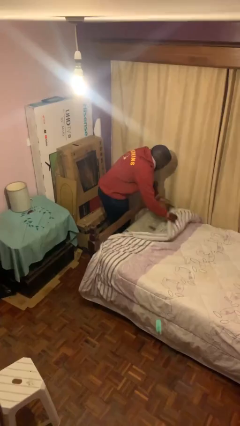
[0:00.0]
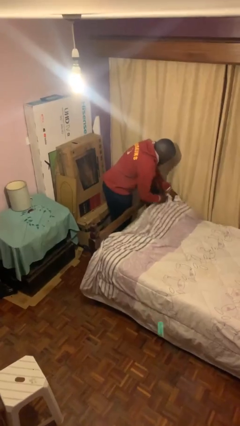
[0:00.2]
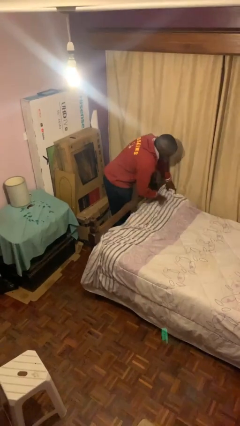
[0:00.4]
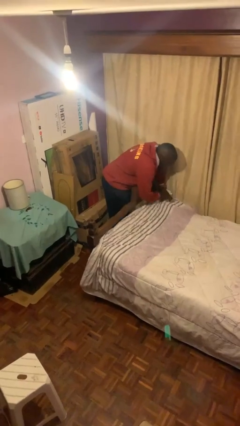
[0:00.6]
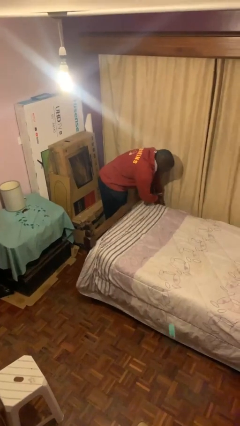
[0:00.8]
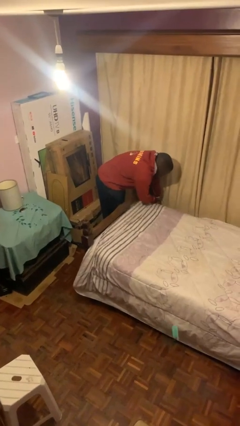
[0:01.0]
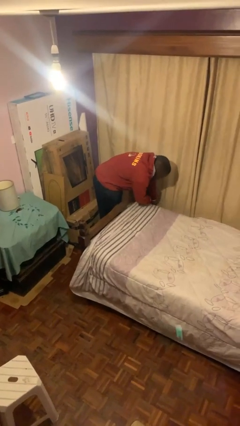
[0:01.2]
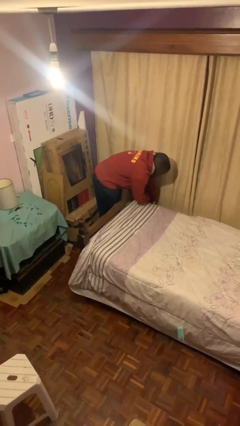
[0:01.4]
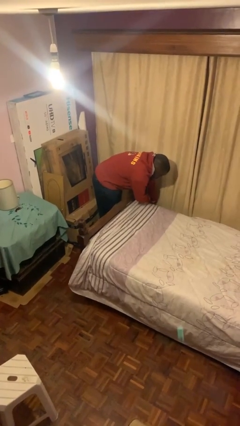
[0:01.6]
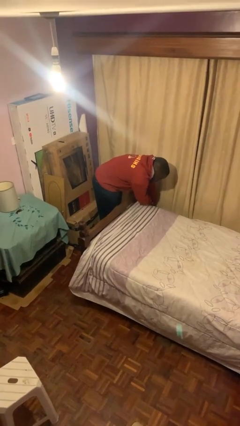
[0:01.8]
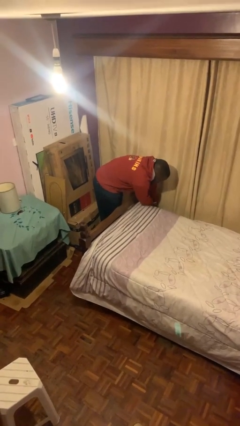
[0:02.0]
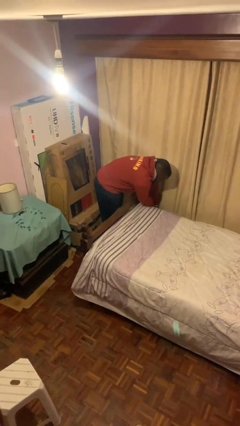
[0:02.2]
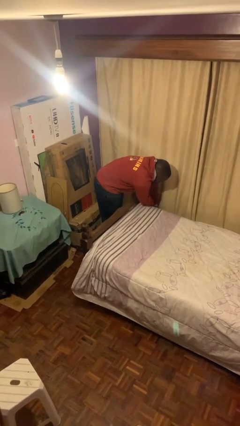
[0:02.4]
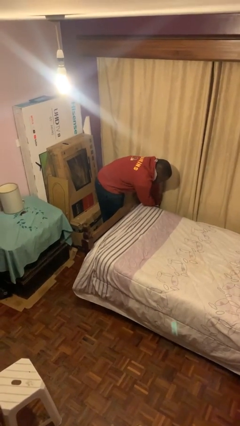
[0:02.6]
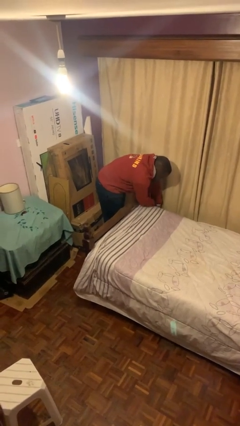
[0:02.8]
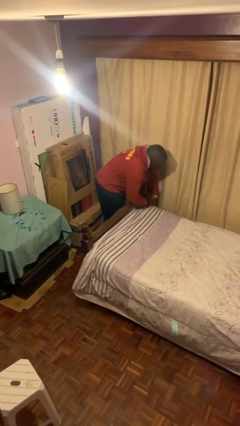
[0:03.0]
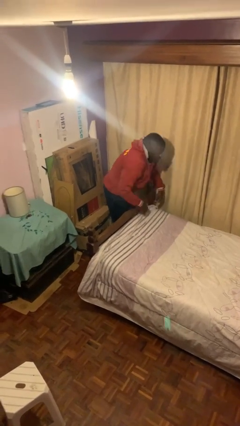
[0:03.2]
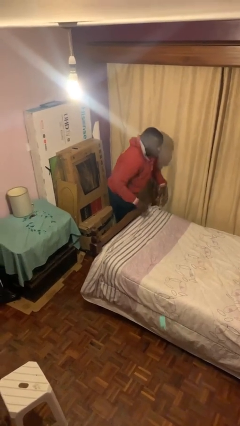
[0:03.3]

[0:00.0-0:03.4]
person makes bed

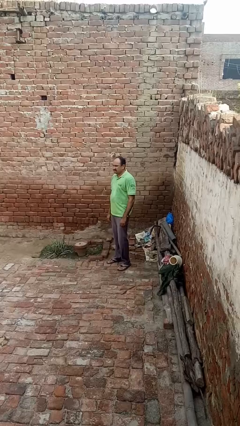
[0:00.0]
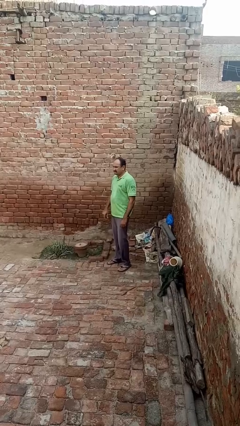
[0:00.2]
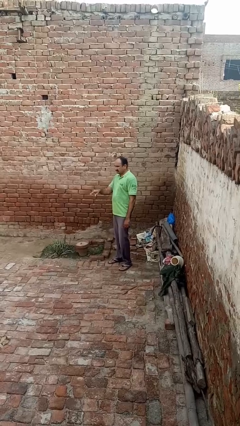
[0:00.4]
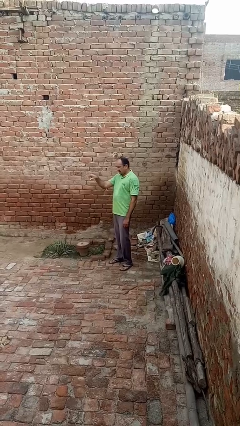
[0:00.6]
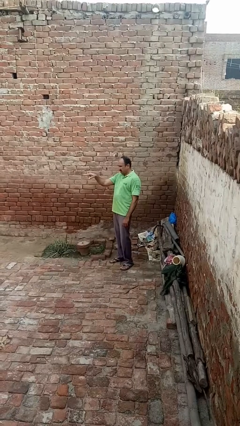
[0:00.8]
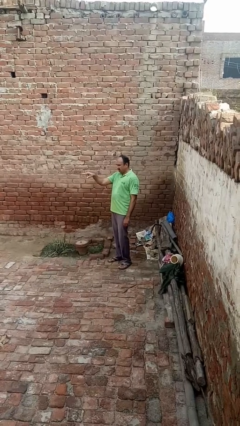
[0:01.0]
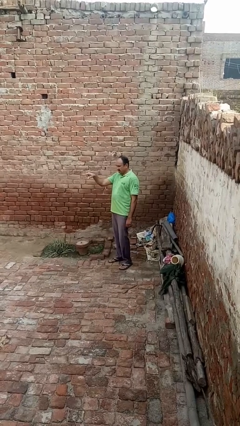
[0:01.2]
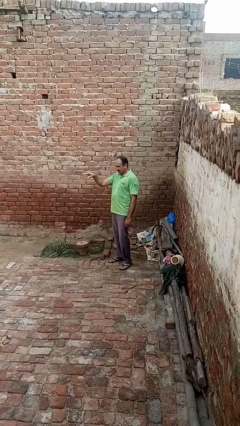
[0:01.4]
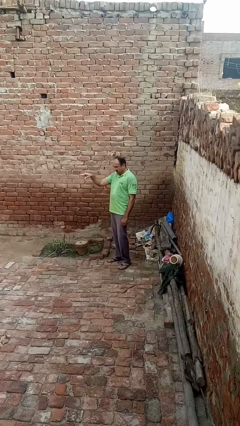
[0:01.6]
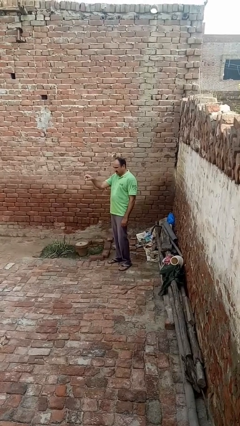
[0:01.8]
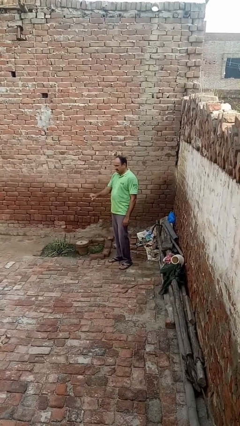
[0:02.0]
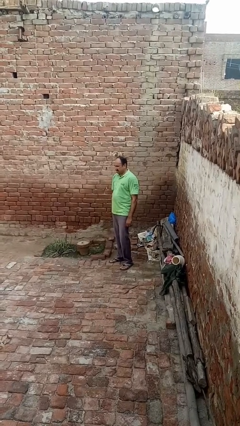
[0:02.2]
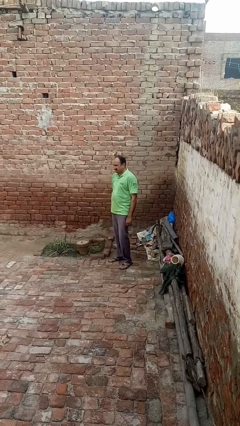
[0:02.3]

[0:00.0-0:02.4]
person points at person

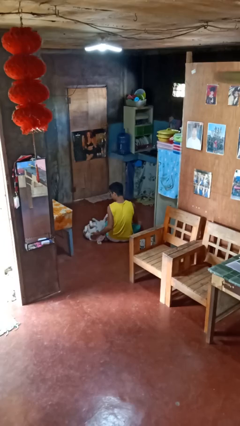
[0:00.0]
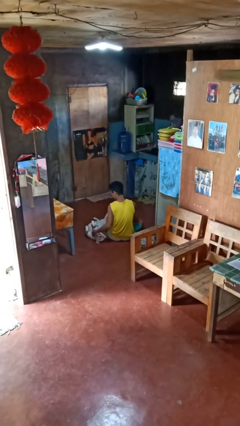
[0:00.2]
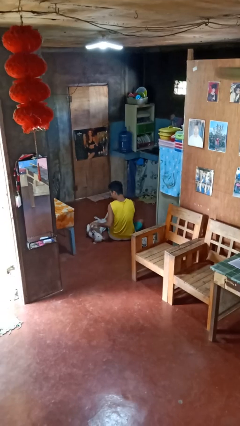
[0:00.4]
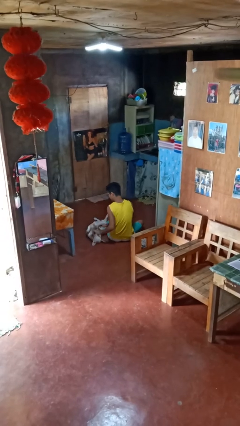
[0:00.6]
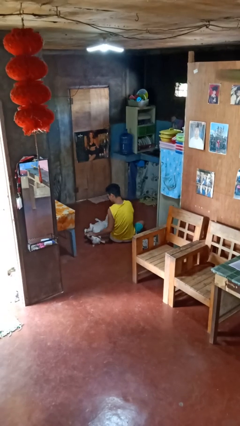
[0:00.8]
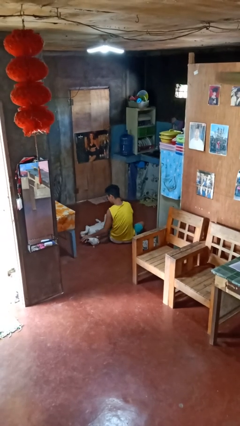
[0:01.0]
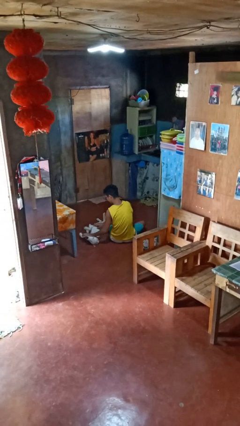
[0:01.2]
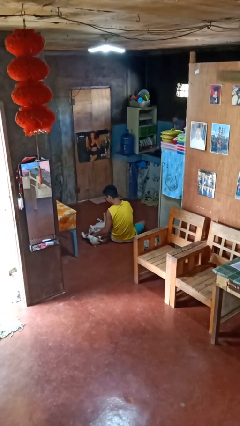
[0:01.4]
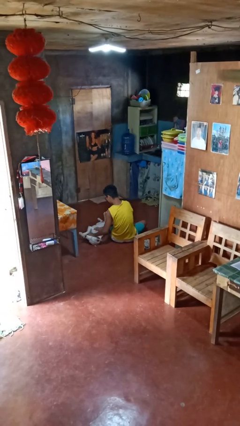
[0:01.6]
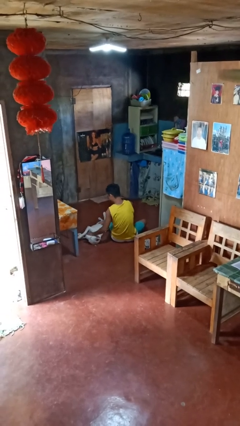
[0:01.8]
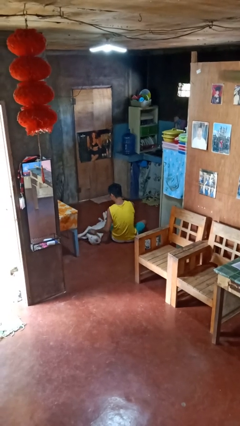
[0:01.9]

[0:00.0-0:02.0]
person pets dog

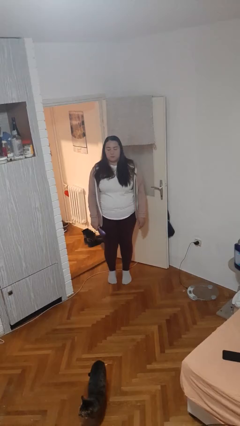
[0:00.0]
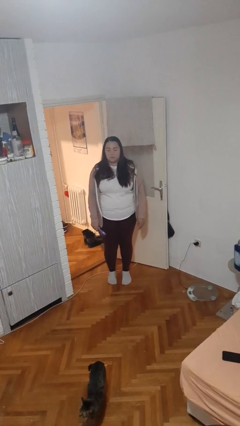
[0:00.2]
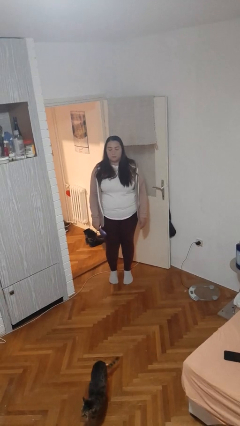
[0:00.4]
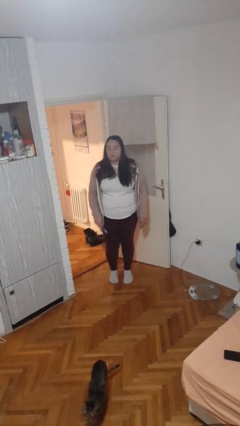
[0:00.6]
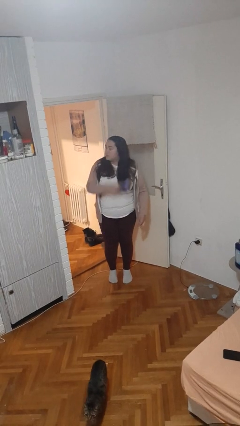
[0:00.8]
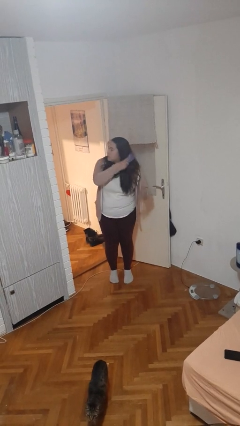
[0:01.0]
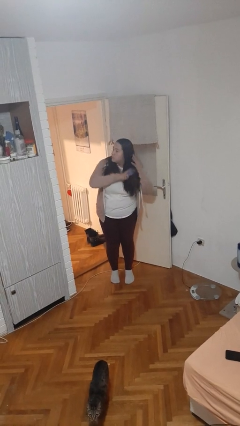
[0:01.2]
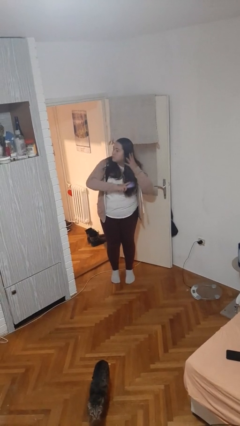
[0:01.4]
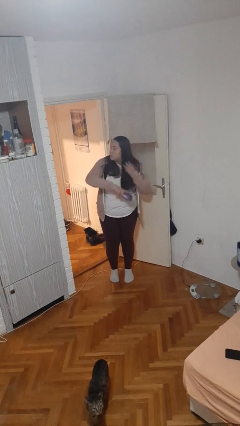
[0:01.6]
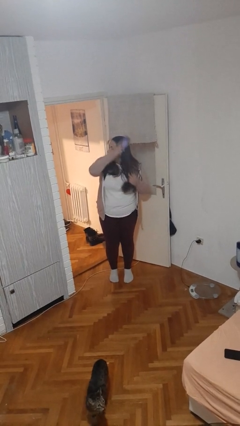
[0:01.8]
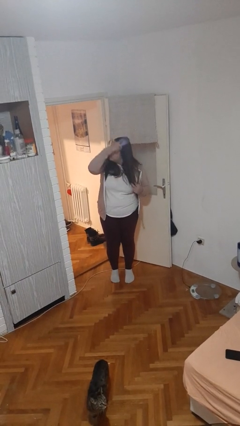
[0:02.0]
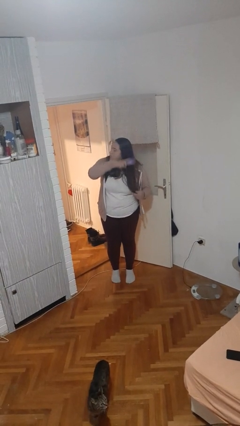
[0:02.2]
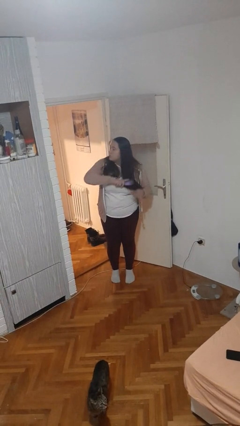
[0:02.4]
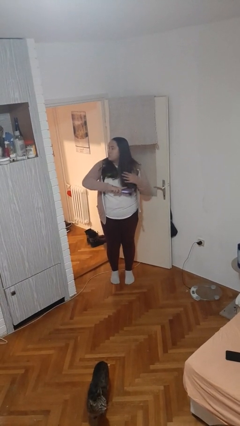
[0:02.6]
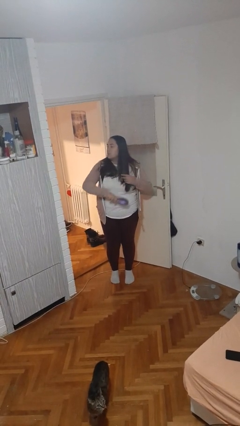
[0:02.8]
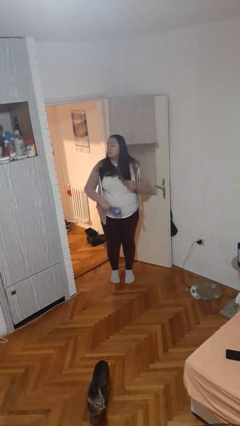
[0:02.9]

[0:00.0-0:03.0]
person brushes hair

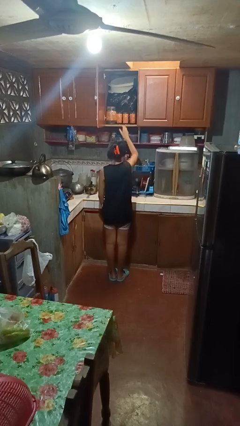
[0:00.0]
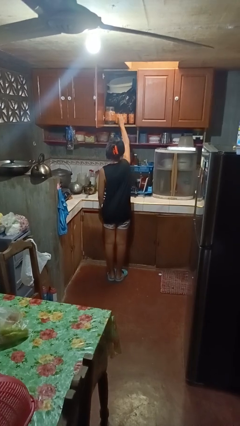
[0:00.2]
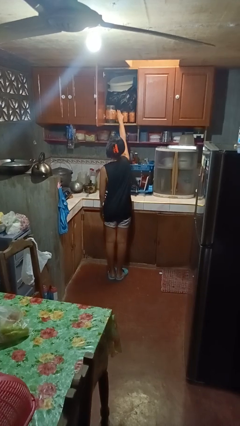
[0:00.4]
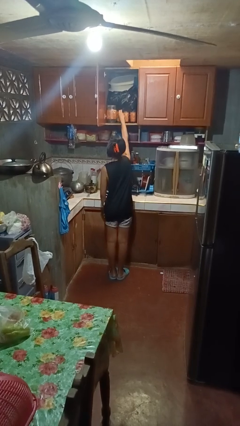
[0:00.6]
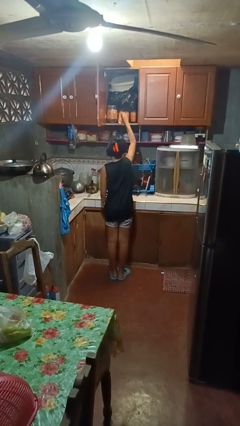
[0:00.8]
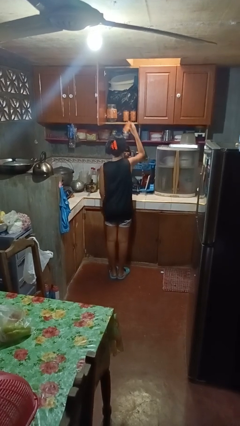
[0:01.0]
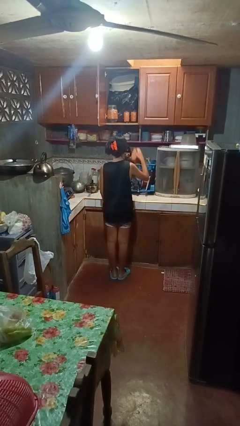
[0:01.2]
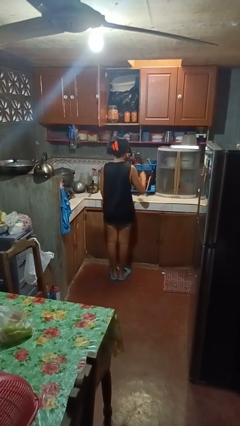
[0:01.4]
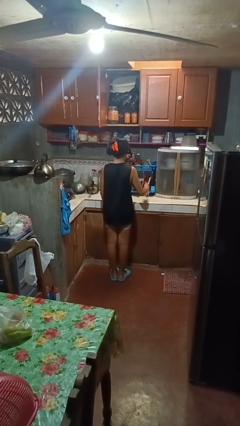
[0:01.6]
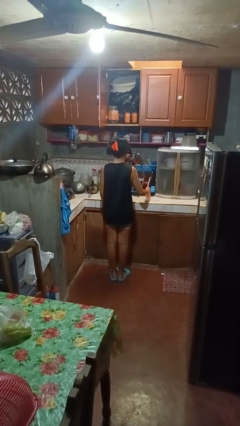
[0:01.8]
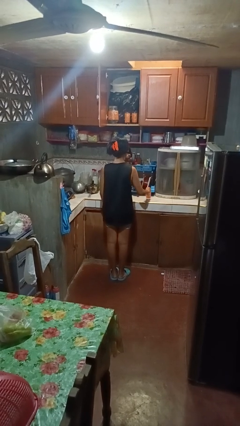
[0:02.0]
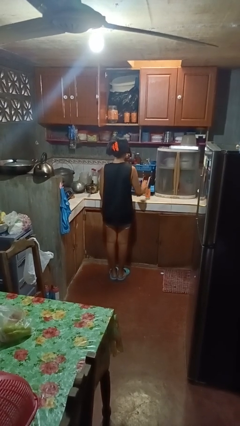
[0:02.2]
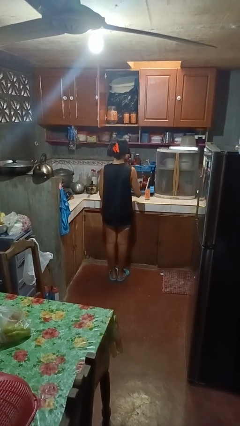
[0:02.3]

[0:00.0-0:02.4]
person takes object from cabinet

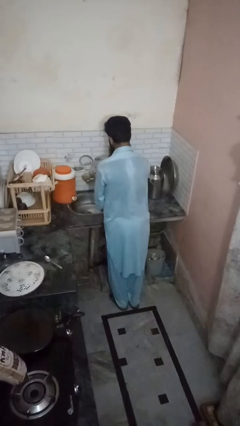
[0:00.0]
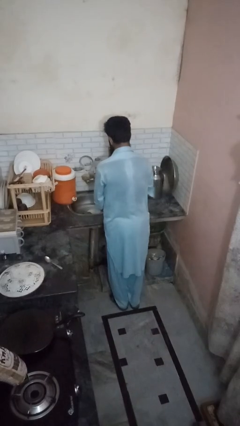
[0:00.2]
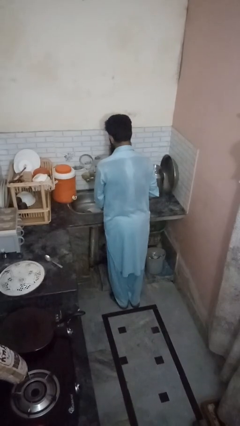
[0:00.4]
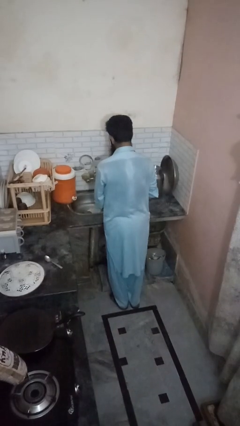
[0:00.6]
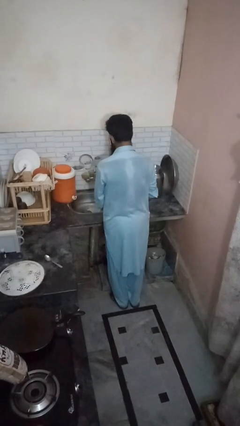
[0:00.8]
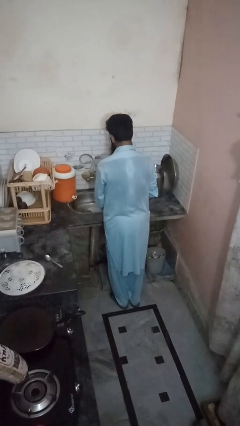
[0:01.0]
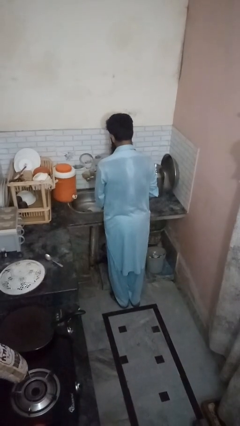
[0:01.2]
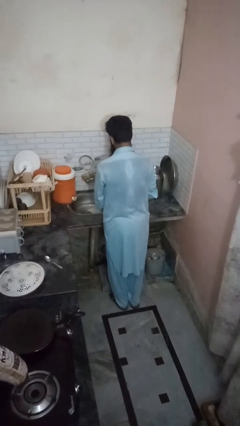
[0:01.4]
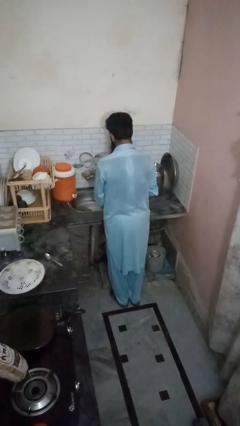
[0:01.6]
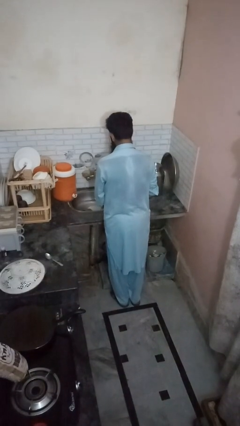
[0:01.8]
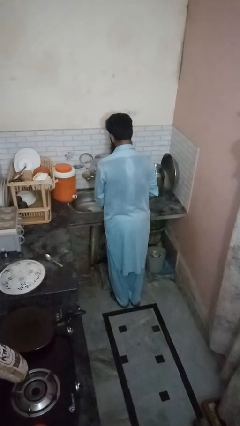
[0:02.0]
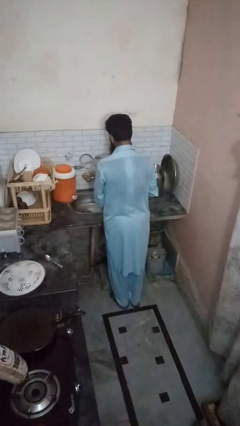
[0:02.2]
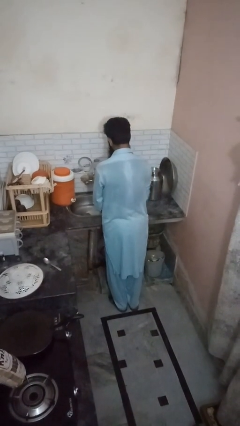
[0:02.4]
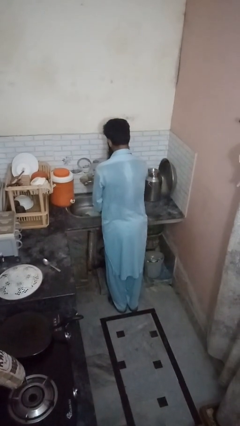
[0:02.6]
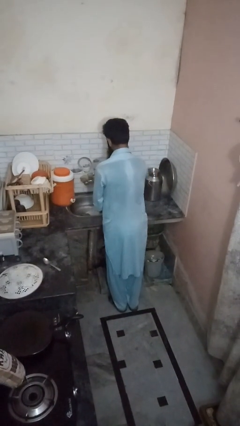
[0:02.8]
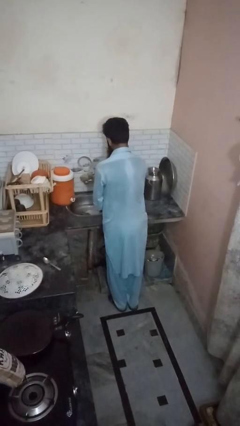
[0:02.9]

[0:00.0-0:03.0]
person closes dishwasher

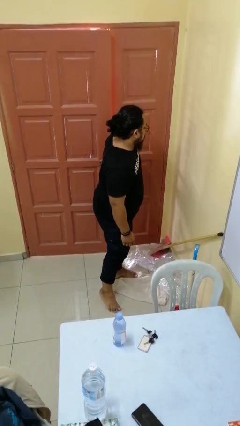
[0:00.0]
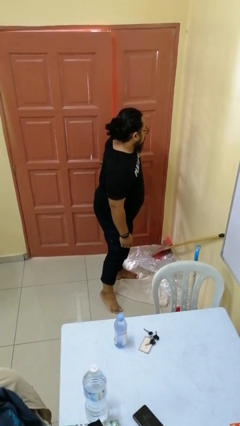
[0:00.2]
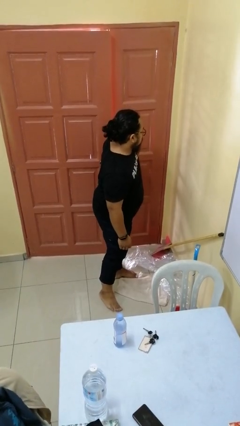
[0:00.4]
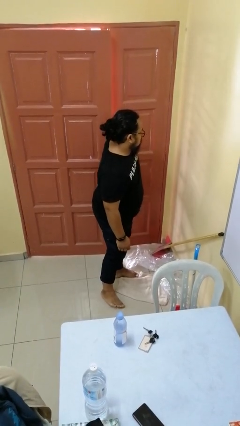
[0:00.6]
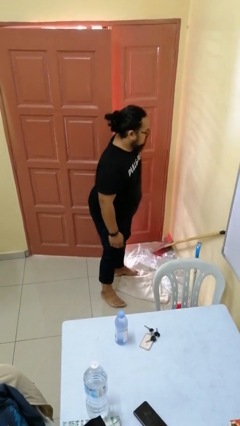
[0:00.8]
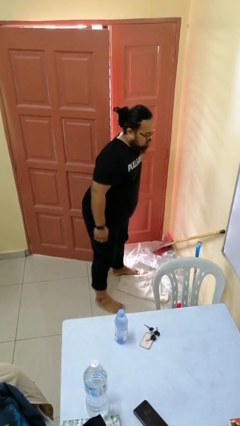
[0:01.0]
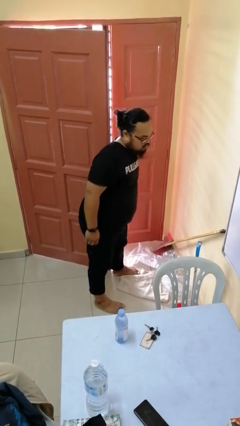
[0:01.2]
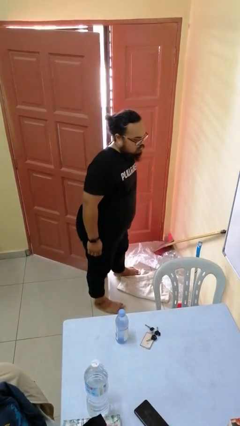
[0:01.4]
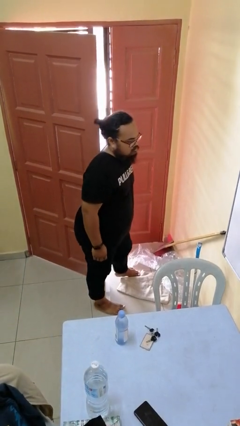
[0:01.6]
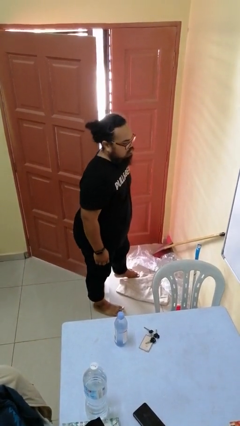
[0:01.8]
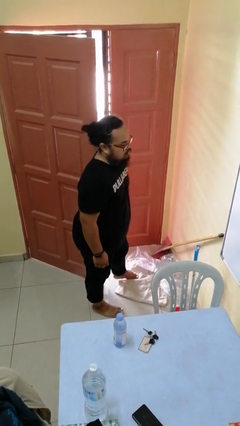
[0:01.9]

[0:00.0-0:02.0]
person opens facility door
